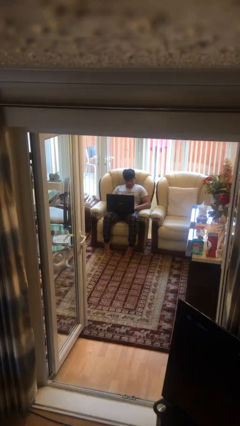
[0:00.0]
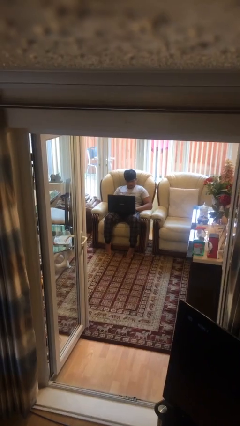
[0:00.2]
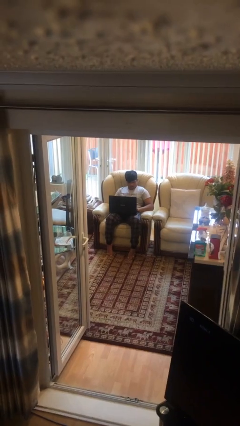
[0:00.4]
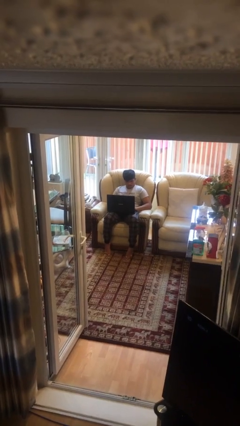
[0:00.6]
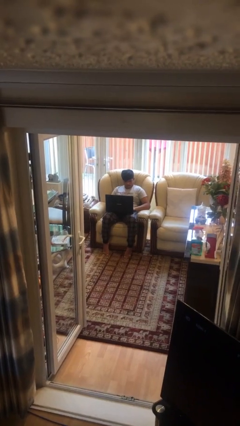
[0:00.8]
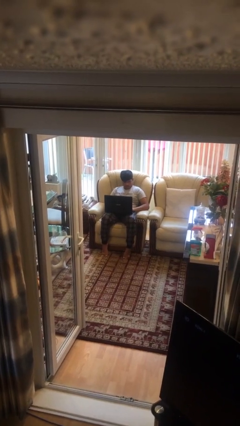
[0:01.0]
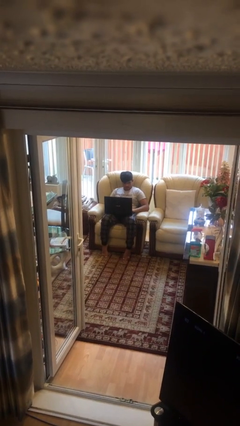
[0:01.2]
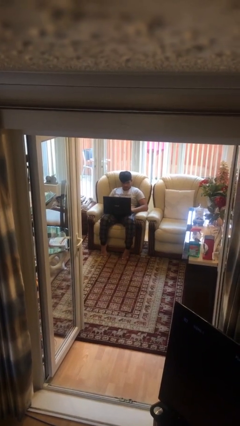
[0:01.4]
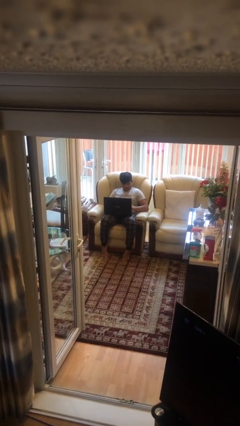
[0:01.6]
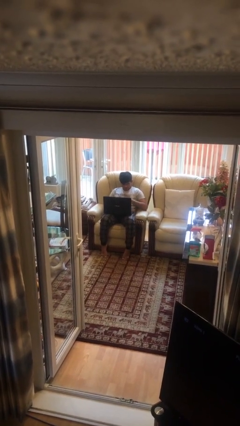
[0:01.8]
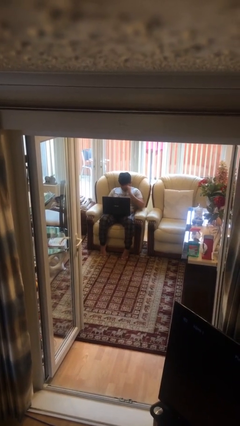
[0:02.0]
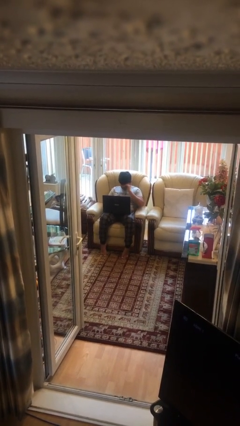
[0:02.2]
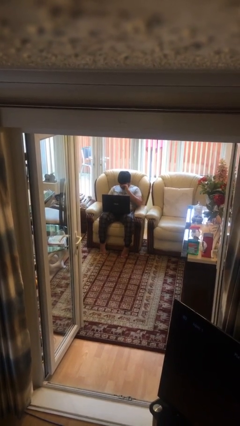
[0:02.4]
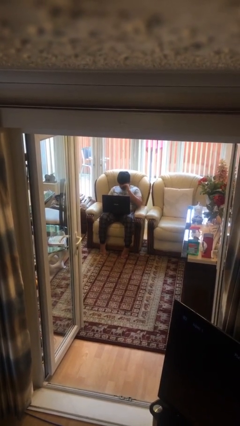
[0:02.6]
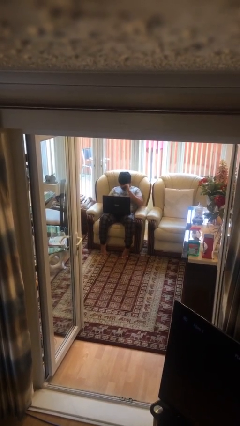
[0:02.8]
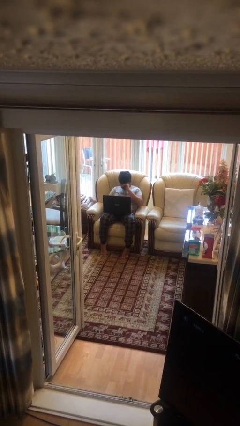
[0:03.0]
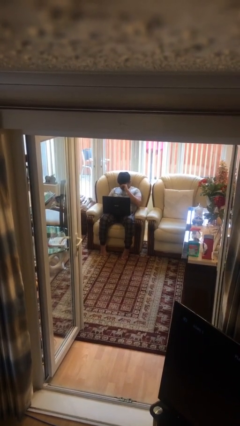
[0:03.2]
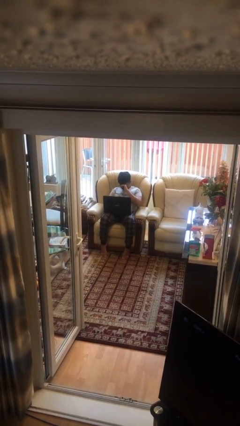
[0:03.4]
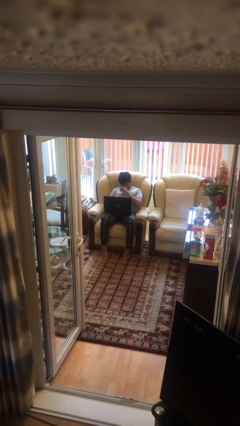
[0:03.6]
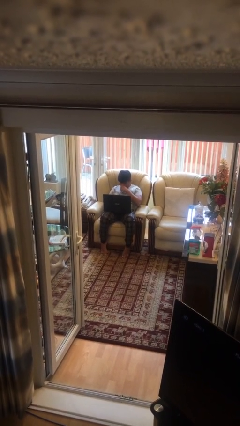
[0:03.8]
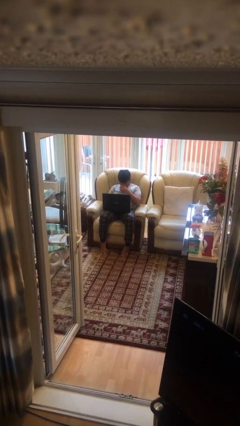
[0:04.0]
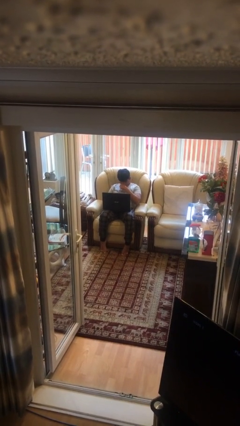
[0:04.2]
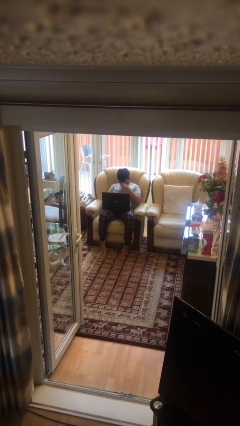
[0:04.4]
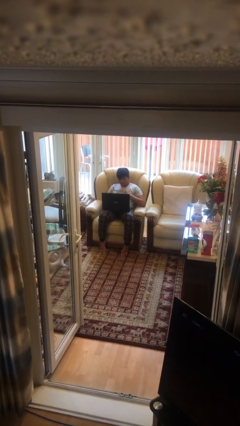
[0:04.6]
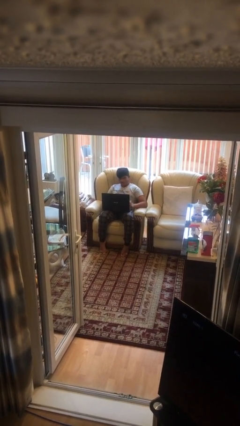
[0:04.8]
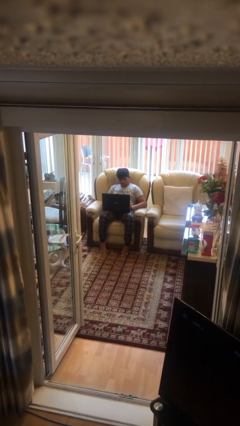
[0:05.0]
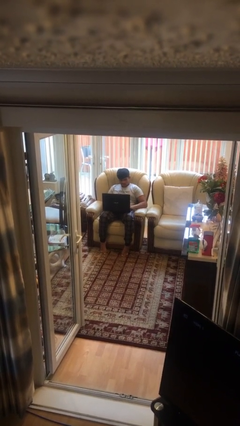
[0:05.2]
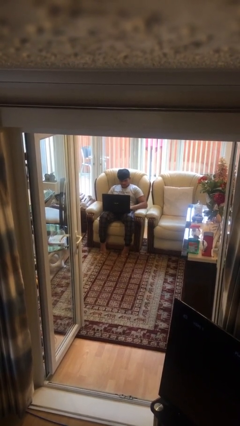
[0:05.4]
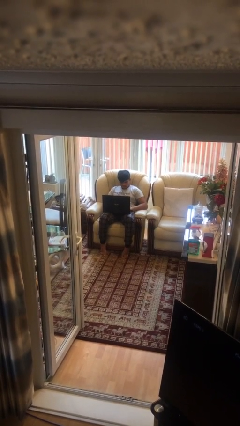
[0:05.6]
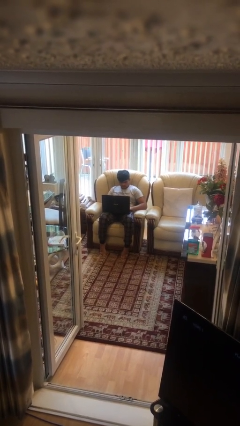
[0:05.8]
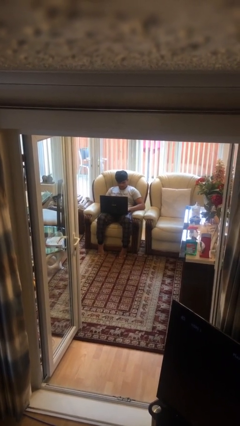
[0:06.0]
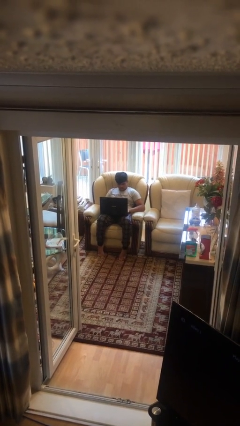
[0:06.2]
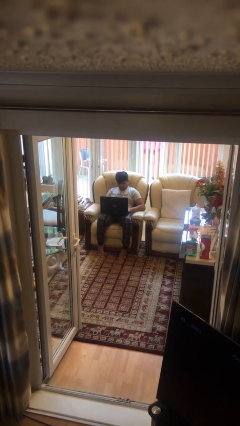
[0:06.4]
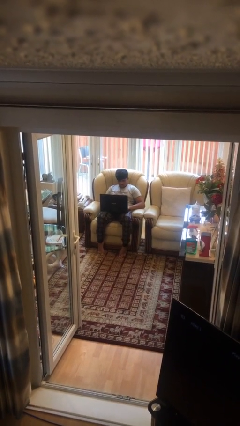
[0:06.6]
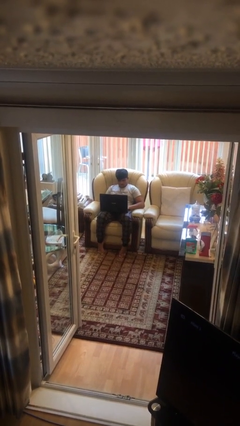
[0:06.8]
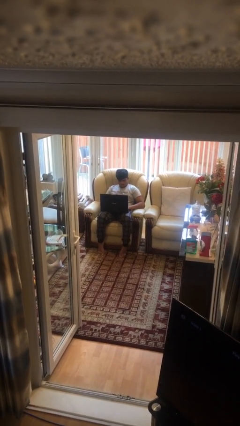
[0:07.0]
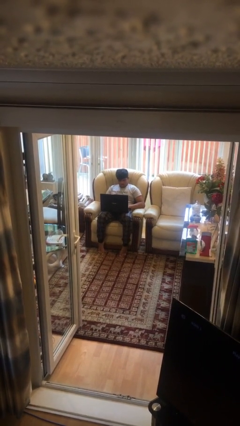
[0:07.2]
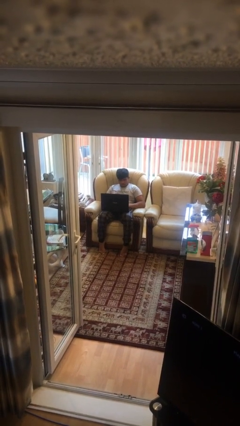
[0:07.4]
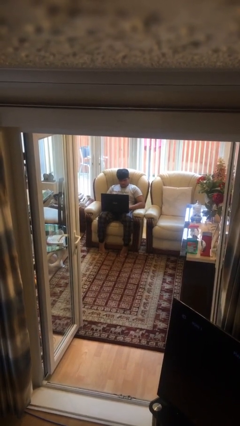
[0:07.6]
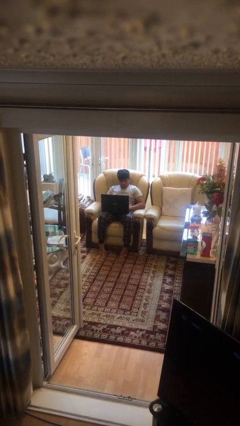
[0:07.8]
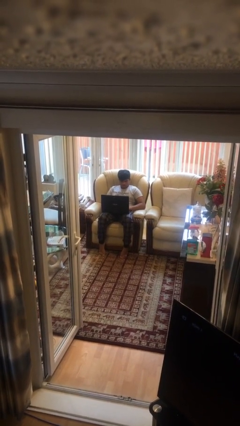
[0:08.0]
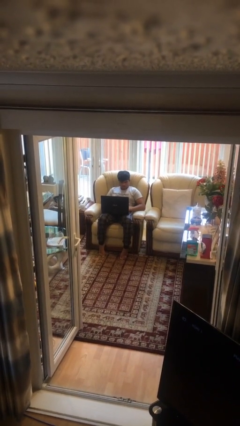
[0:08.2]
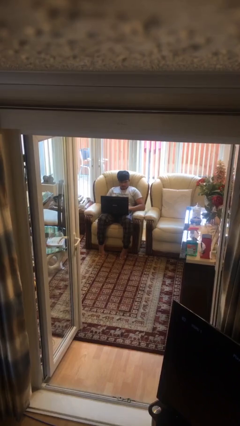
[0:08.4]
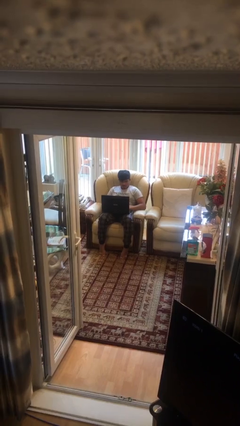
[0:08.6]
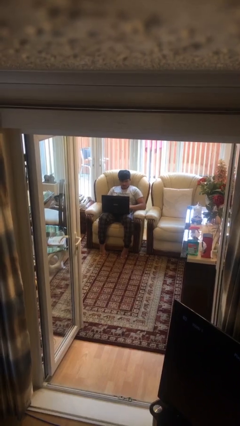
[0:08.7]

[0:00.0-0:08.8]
person interacts with laptop

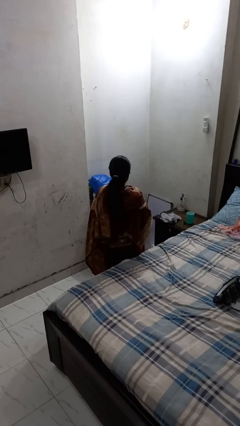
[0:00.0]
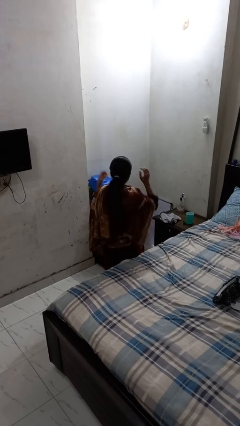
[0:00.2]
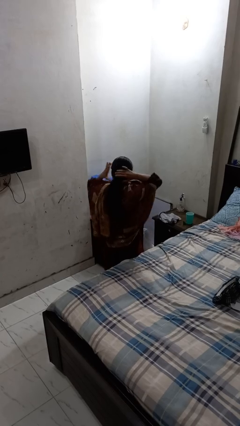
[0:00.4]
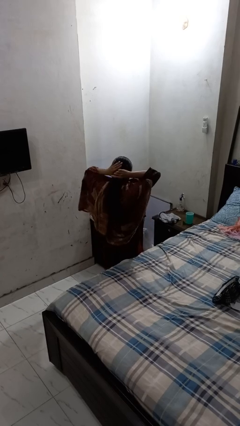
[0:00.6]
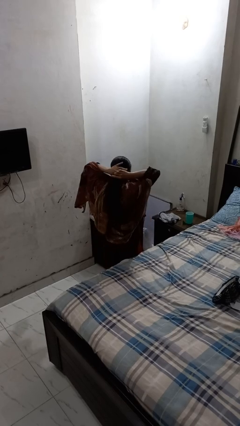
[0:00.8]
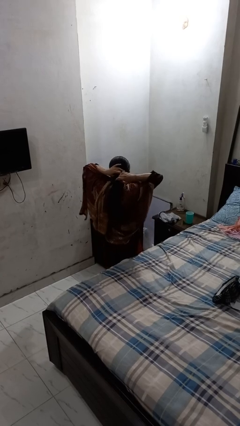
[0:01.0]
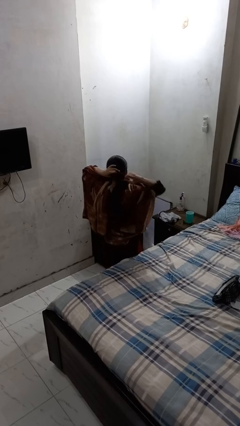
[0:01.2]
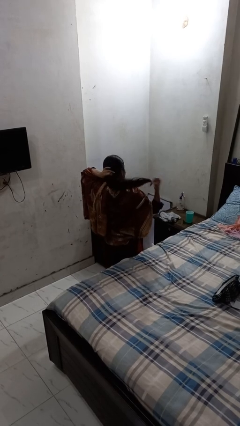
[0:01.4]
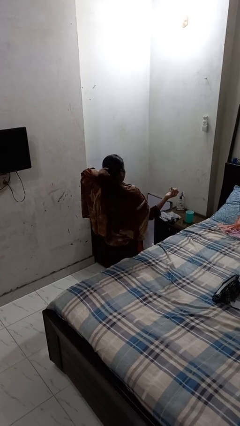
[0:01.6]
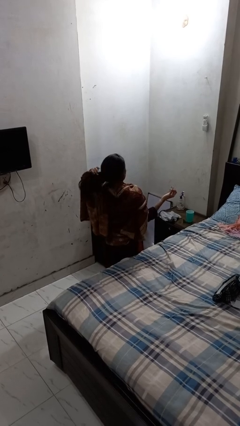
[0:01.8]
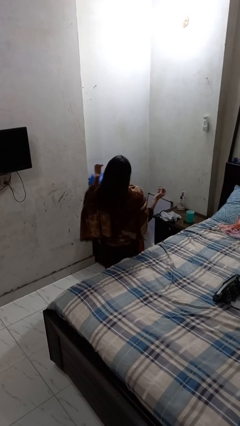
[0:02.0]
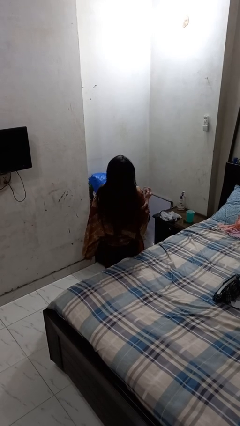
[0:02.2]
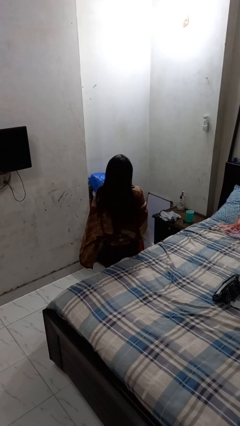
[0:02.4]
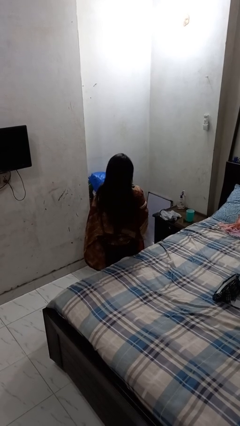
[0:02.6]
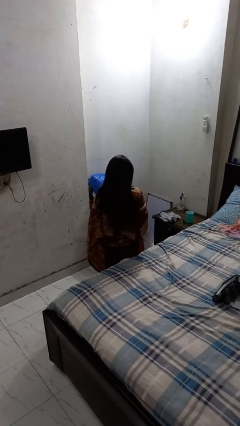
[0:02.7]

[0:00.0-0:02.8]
person takes off hairtie

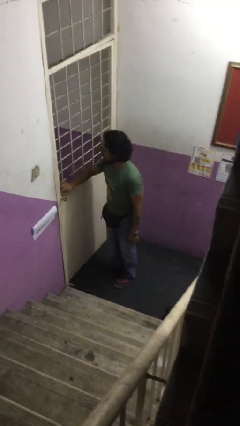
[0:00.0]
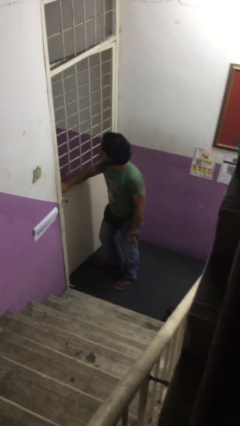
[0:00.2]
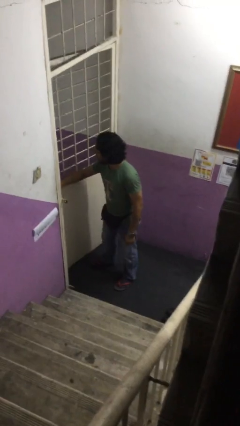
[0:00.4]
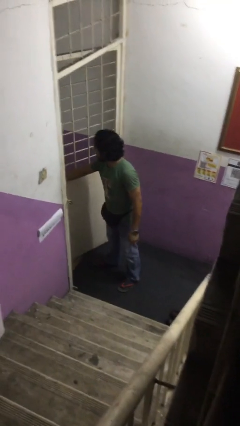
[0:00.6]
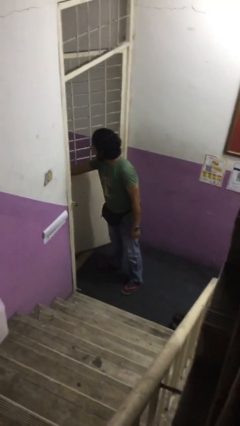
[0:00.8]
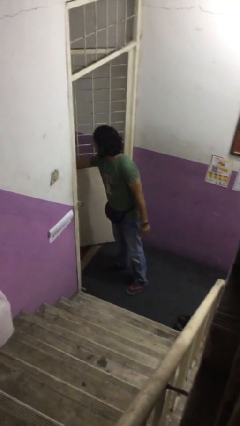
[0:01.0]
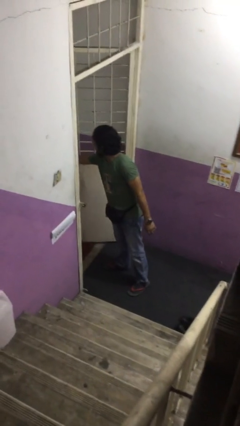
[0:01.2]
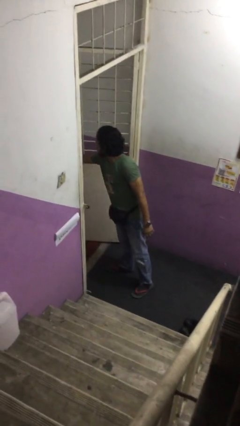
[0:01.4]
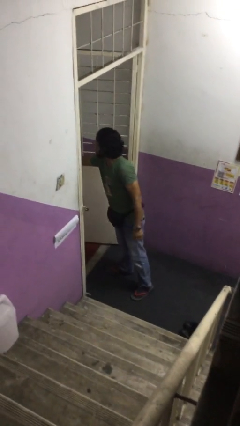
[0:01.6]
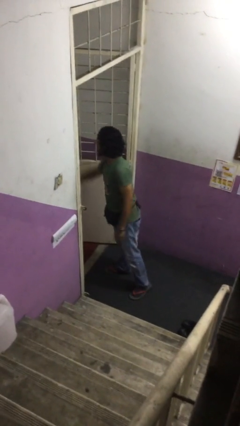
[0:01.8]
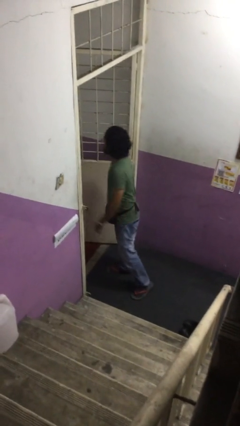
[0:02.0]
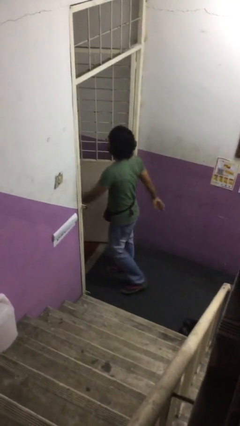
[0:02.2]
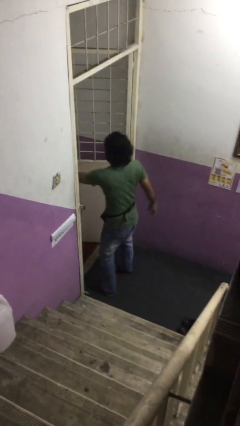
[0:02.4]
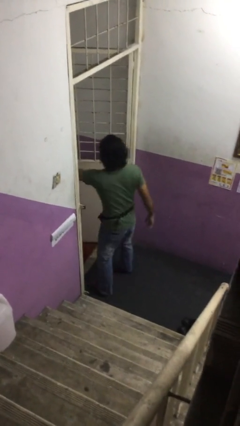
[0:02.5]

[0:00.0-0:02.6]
person opens facility door

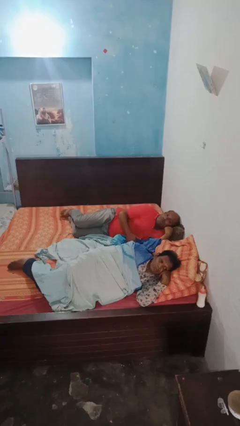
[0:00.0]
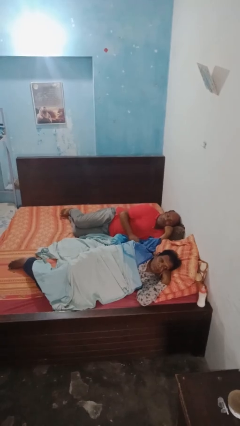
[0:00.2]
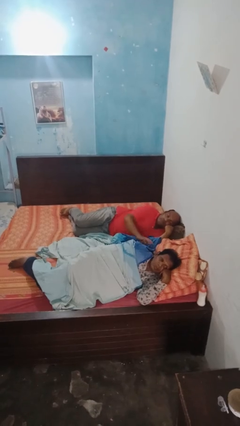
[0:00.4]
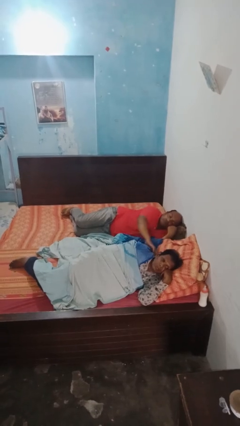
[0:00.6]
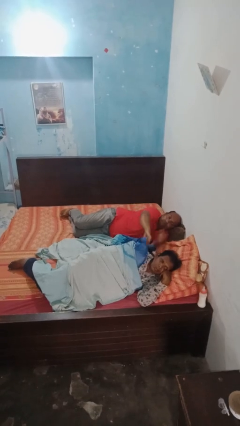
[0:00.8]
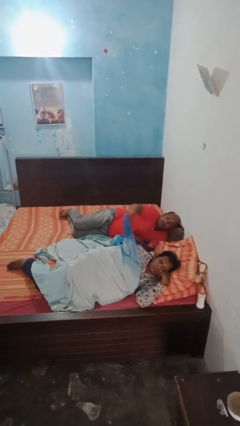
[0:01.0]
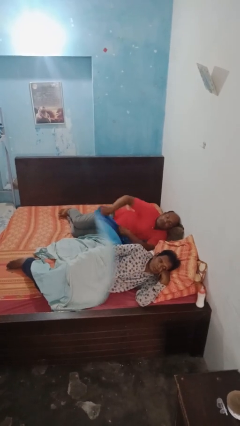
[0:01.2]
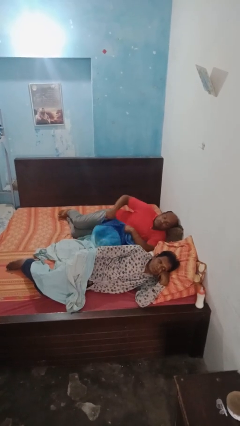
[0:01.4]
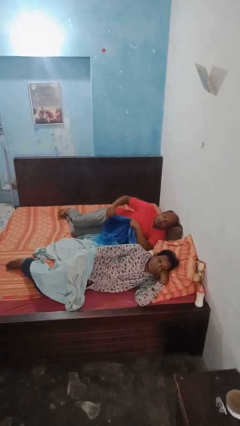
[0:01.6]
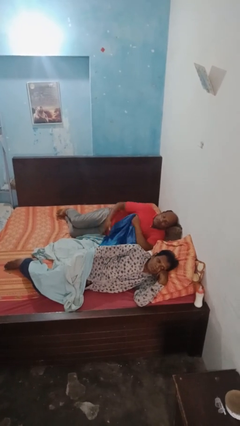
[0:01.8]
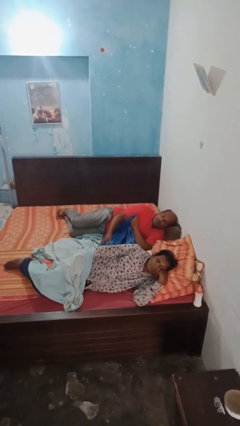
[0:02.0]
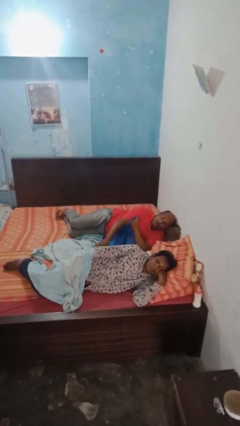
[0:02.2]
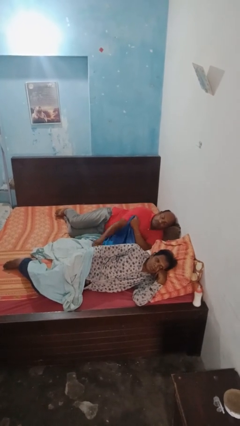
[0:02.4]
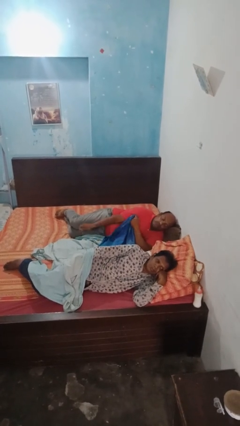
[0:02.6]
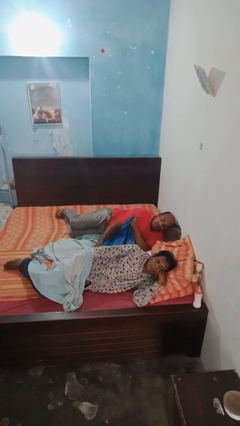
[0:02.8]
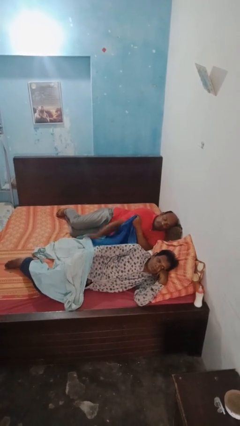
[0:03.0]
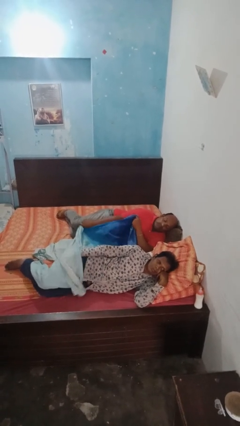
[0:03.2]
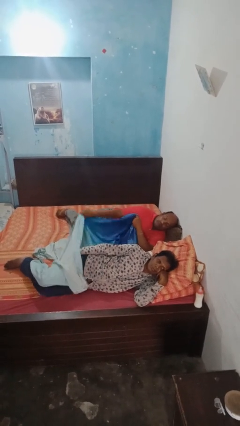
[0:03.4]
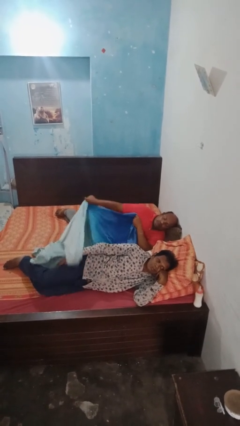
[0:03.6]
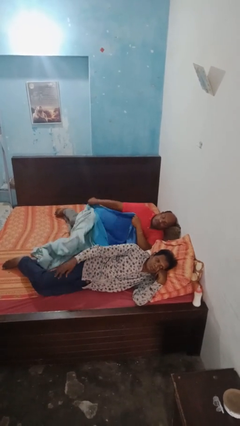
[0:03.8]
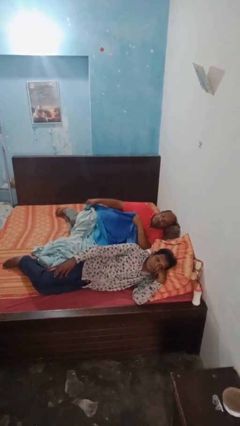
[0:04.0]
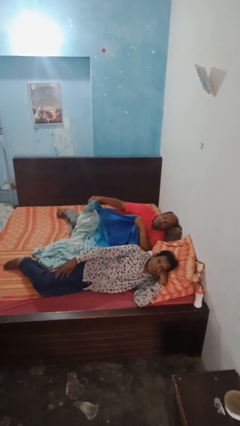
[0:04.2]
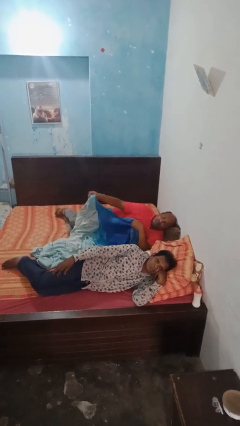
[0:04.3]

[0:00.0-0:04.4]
person uncovers friend with blanket
